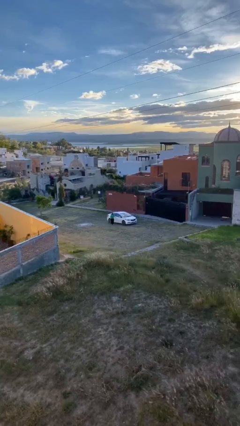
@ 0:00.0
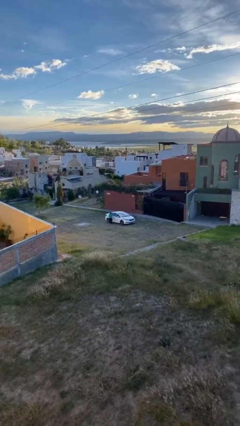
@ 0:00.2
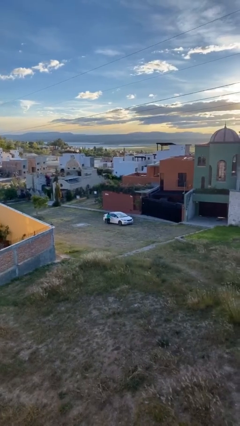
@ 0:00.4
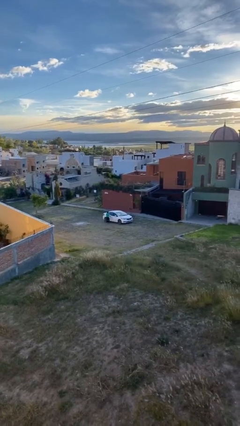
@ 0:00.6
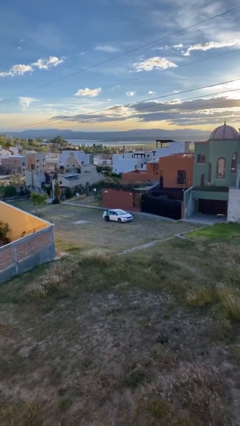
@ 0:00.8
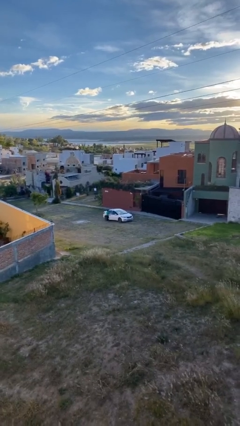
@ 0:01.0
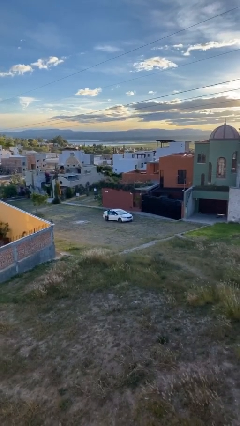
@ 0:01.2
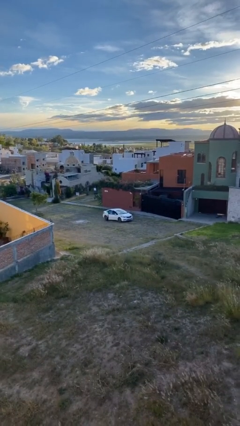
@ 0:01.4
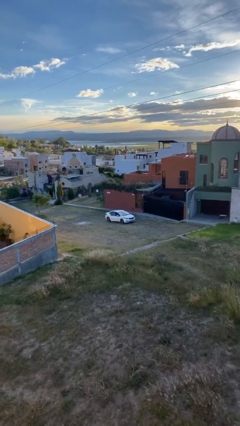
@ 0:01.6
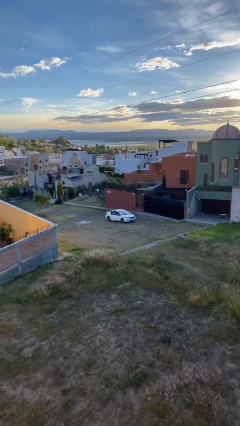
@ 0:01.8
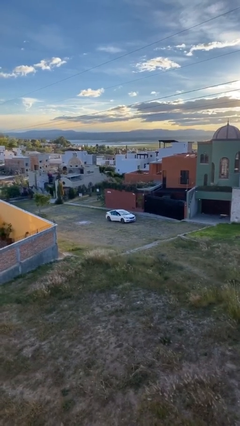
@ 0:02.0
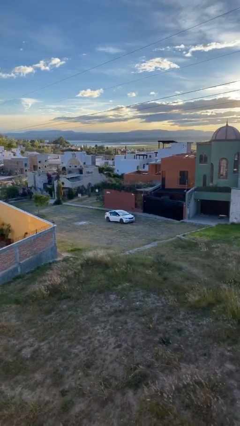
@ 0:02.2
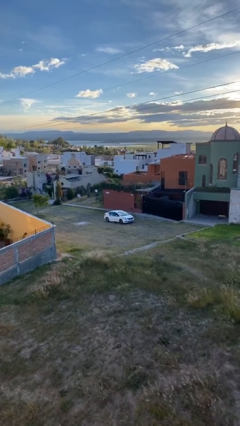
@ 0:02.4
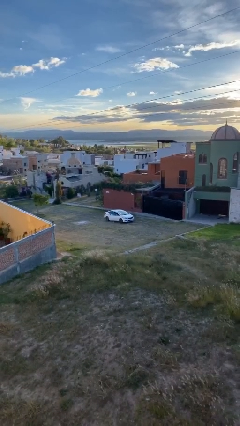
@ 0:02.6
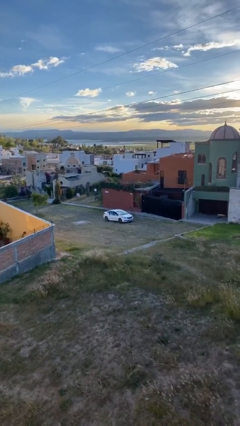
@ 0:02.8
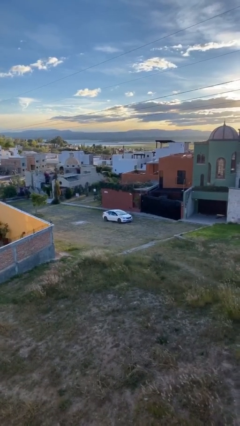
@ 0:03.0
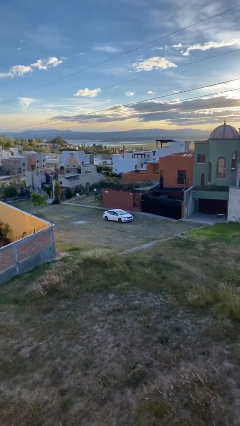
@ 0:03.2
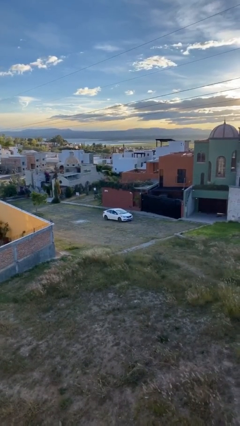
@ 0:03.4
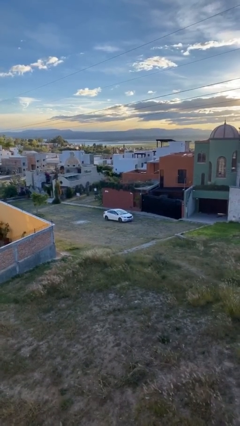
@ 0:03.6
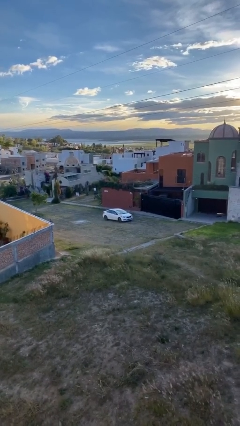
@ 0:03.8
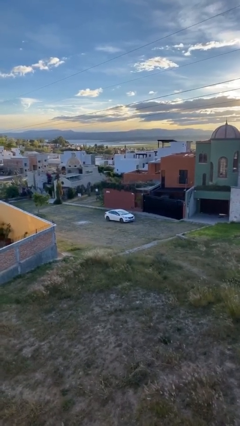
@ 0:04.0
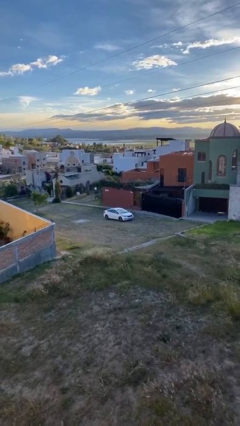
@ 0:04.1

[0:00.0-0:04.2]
car picks up person

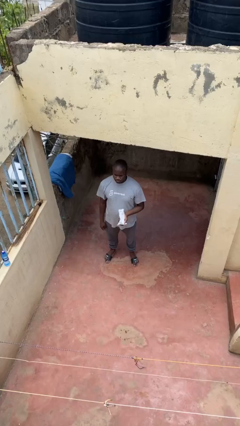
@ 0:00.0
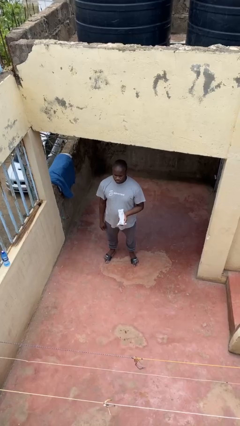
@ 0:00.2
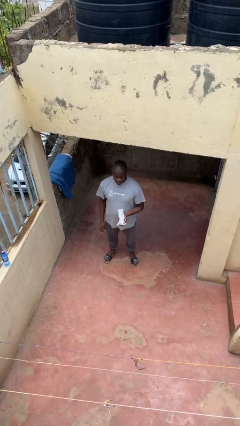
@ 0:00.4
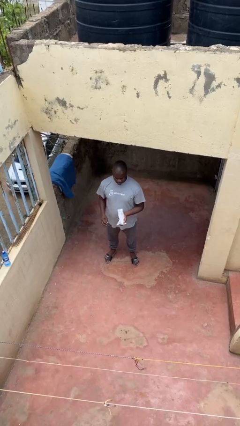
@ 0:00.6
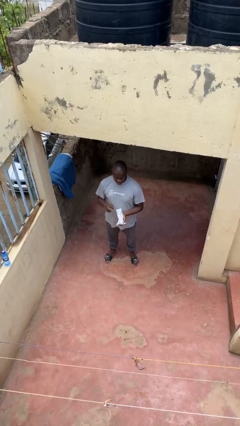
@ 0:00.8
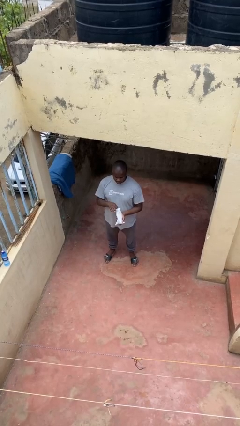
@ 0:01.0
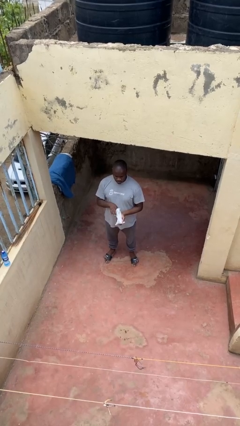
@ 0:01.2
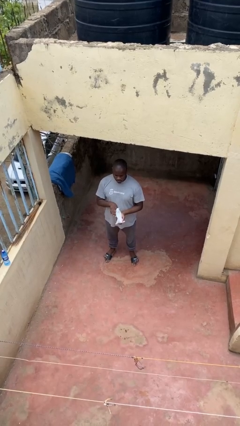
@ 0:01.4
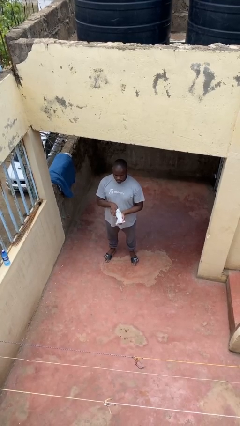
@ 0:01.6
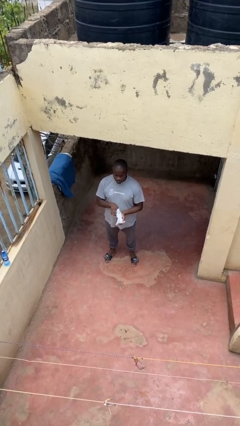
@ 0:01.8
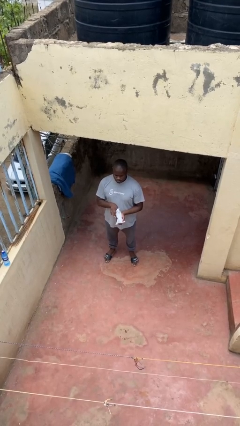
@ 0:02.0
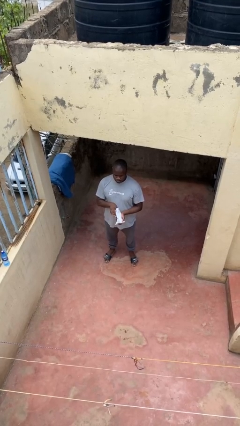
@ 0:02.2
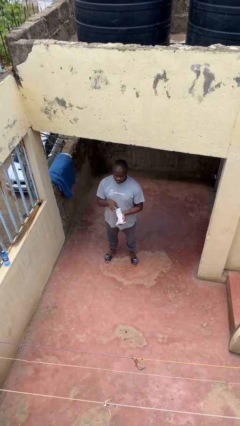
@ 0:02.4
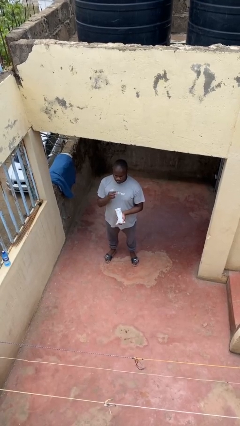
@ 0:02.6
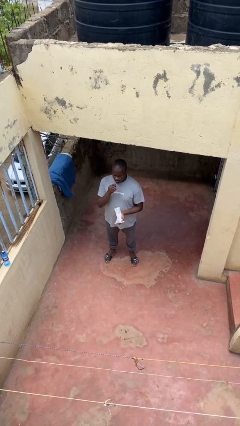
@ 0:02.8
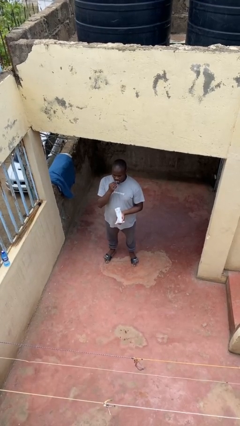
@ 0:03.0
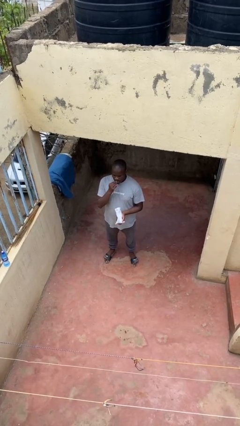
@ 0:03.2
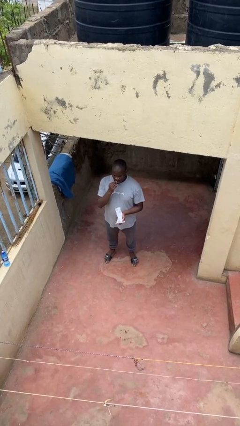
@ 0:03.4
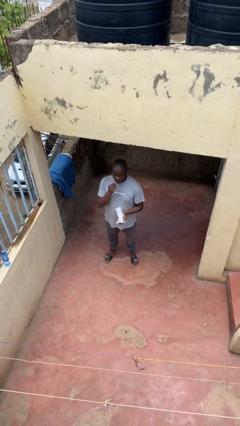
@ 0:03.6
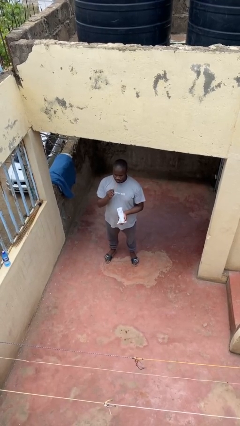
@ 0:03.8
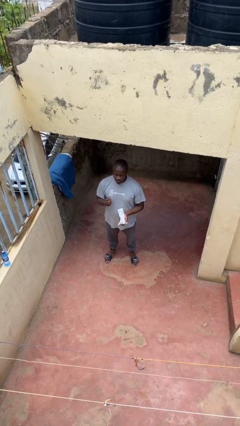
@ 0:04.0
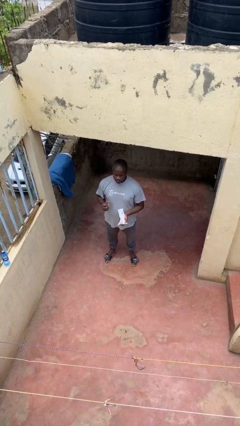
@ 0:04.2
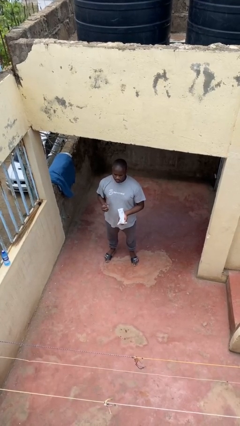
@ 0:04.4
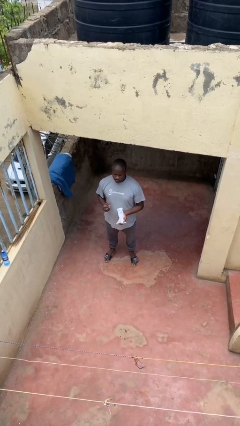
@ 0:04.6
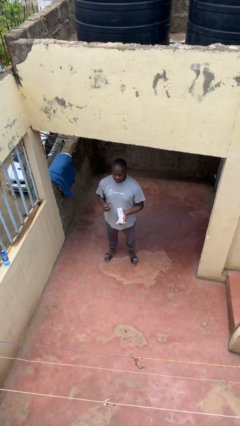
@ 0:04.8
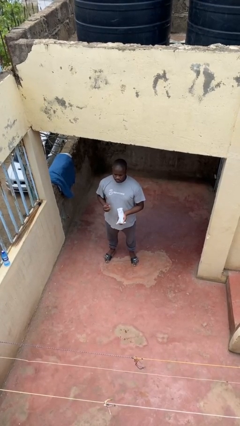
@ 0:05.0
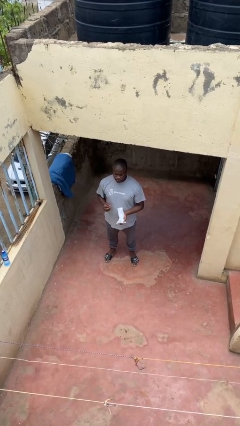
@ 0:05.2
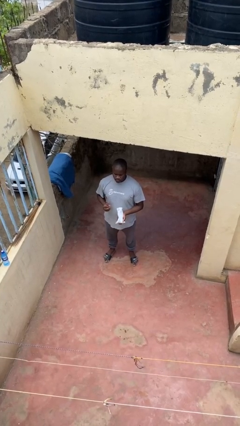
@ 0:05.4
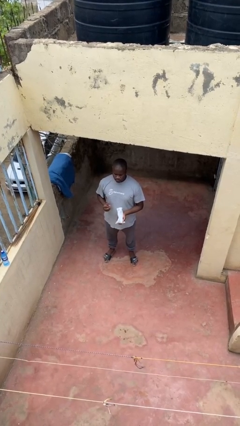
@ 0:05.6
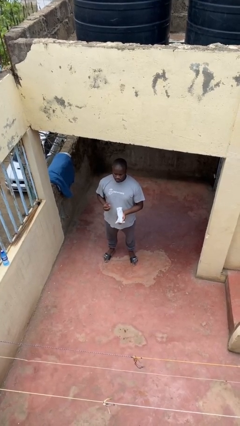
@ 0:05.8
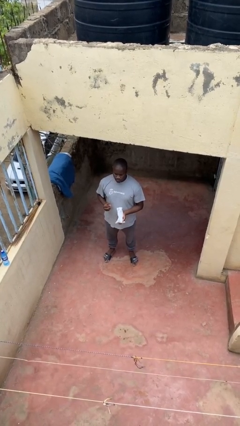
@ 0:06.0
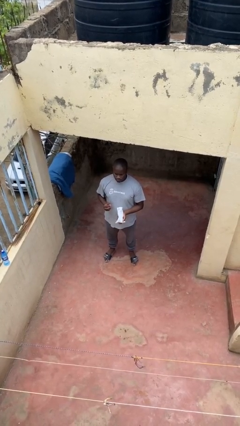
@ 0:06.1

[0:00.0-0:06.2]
person eats snack from bag

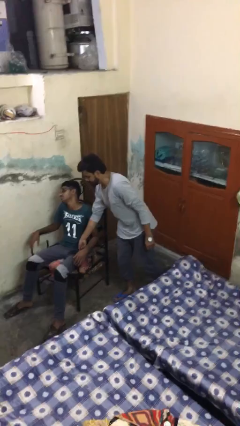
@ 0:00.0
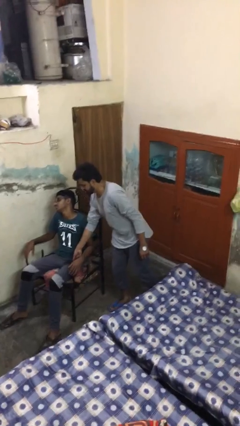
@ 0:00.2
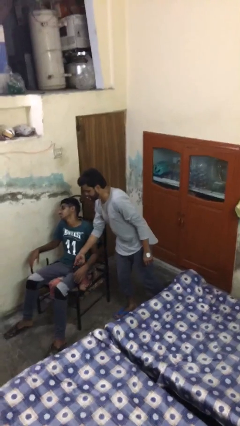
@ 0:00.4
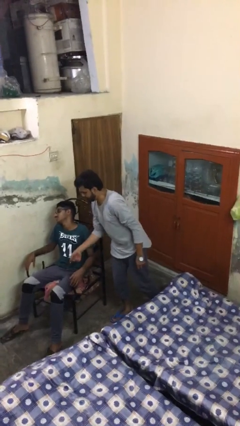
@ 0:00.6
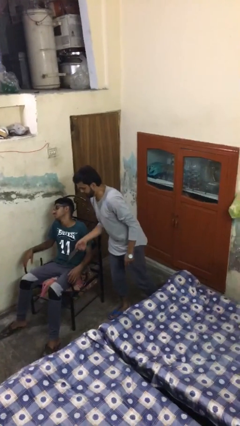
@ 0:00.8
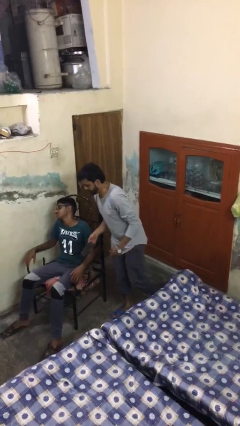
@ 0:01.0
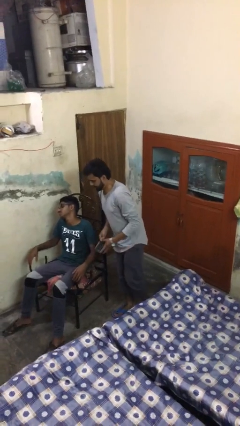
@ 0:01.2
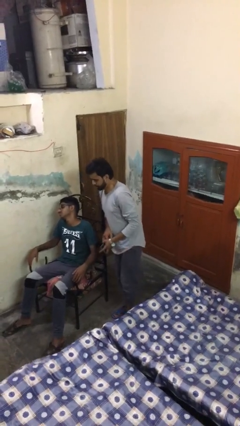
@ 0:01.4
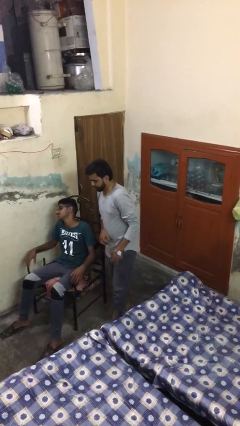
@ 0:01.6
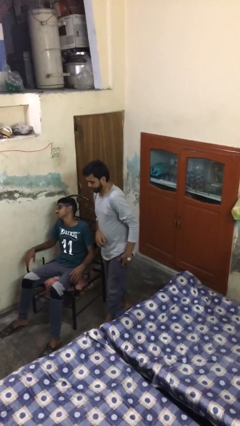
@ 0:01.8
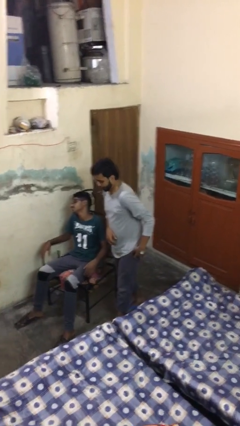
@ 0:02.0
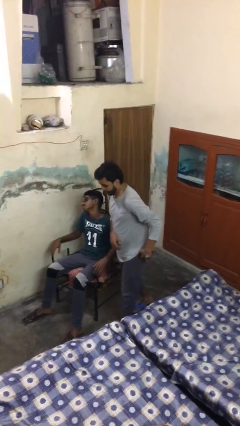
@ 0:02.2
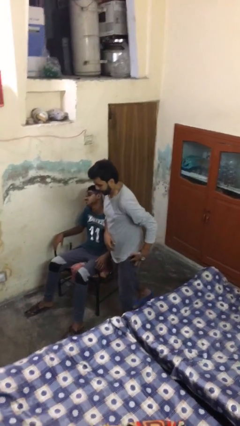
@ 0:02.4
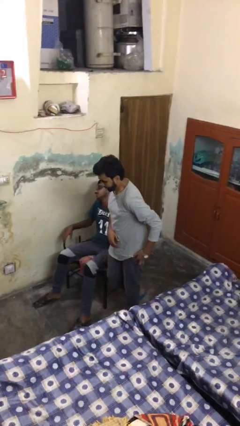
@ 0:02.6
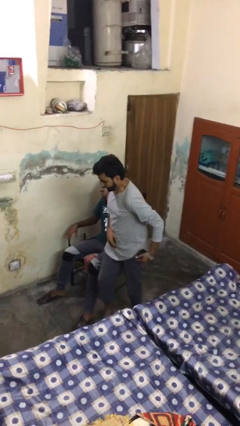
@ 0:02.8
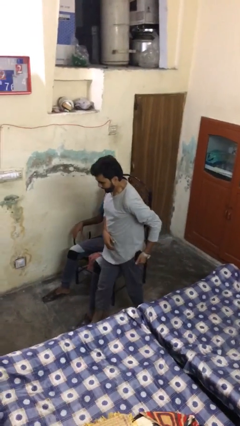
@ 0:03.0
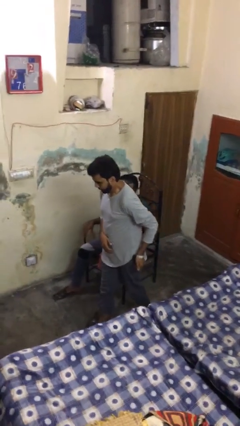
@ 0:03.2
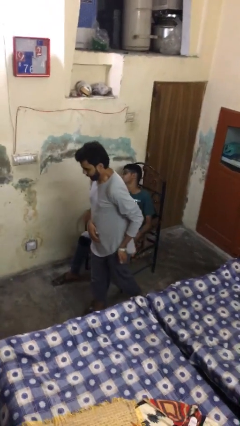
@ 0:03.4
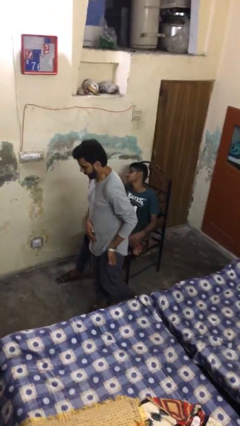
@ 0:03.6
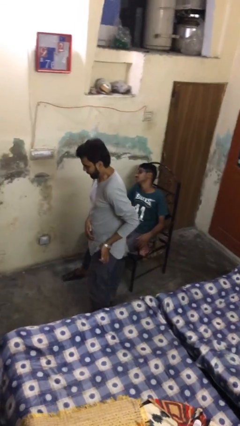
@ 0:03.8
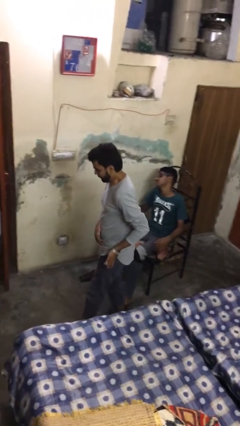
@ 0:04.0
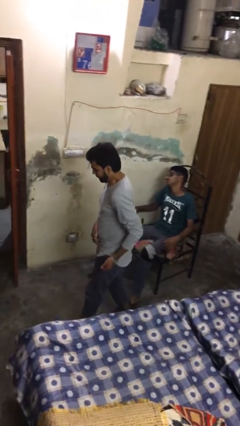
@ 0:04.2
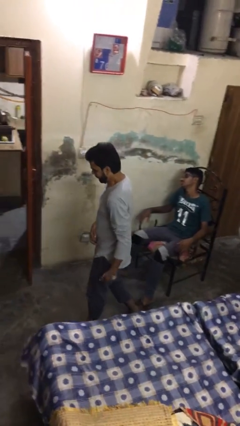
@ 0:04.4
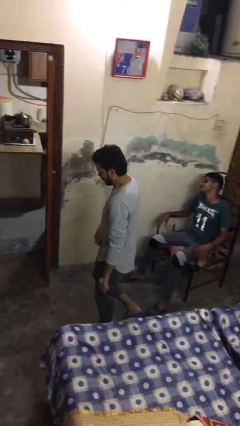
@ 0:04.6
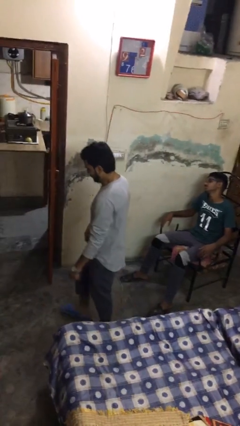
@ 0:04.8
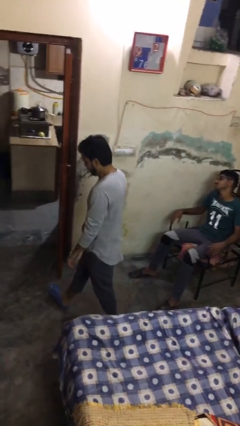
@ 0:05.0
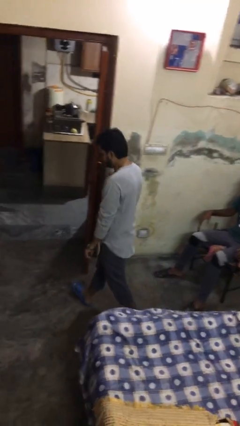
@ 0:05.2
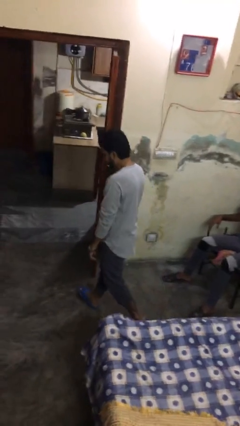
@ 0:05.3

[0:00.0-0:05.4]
person steals object from person

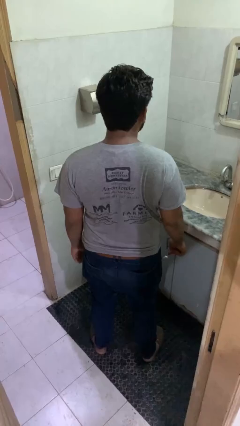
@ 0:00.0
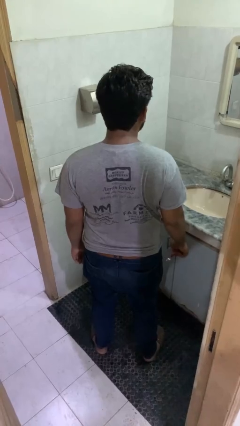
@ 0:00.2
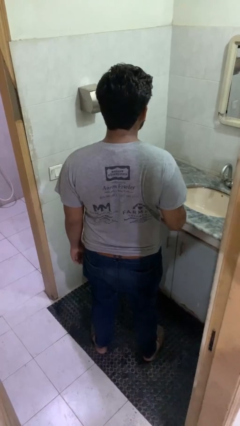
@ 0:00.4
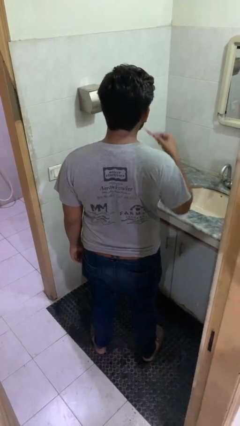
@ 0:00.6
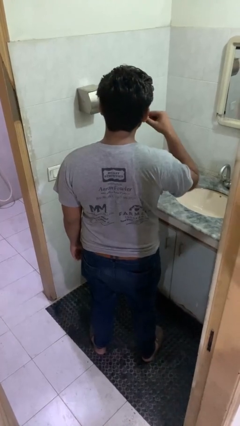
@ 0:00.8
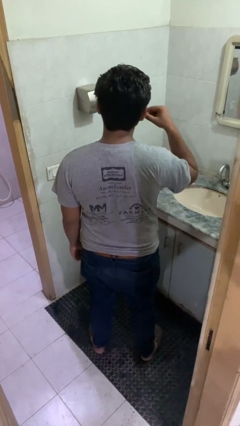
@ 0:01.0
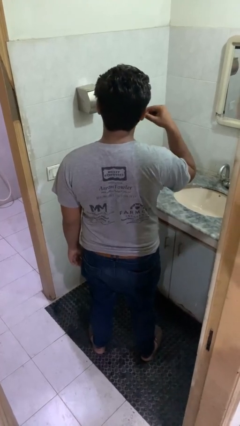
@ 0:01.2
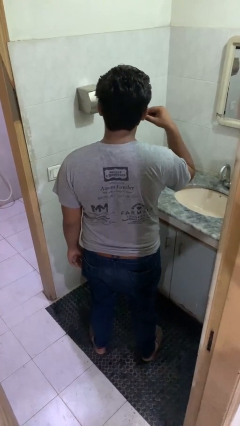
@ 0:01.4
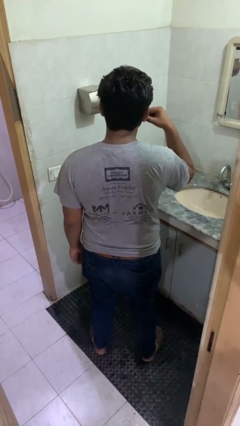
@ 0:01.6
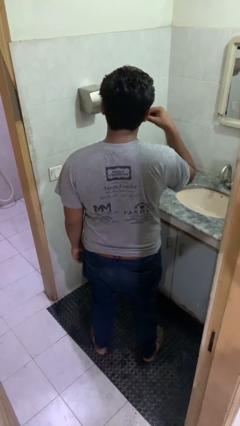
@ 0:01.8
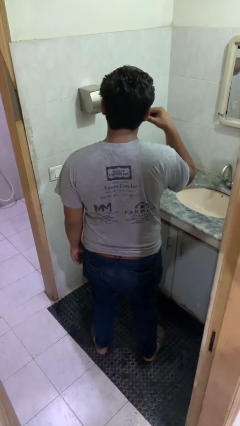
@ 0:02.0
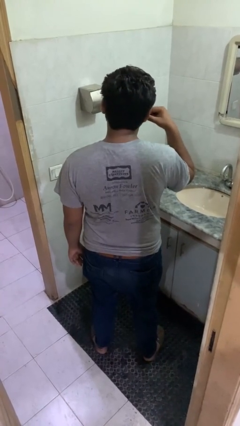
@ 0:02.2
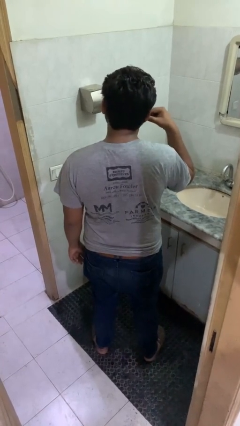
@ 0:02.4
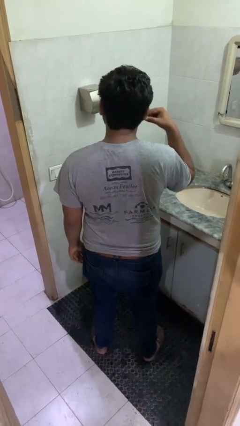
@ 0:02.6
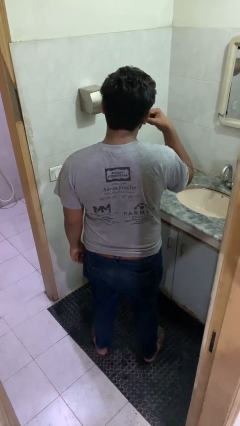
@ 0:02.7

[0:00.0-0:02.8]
person brushes teeth
